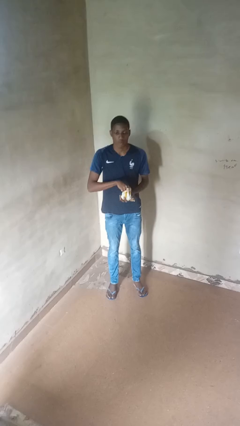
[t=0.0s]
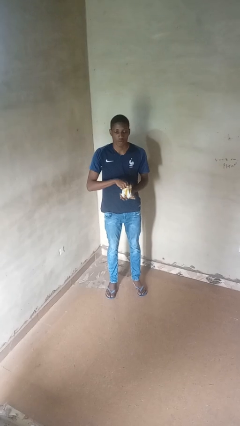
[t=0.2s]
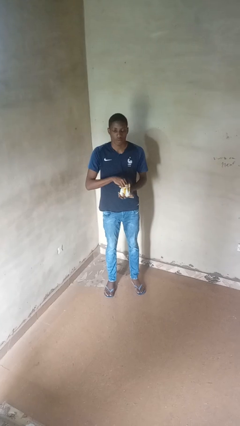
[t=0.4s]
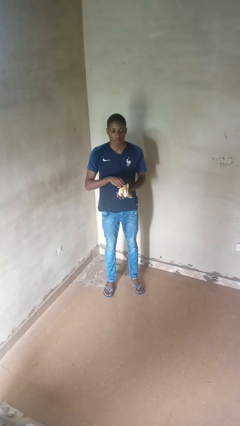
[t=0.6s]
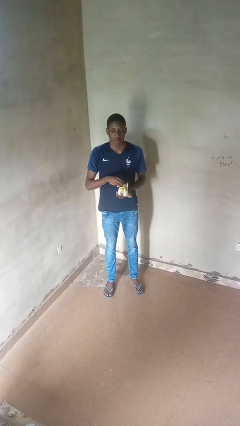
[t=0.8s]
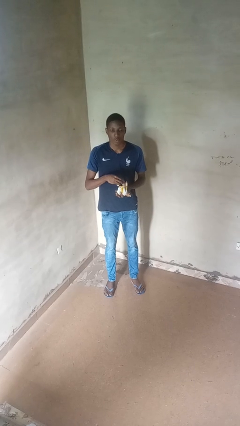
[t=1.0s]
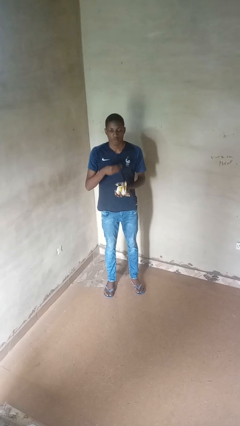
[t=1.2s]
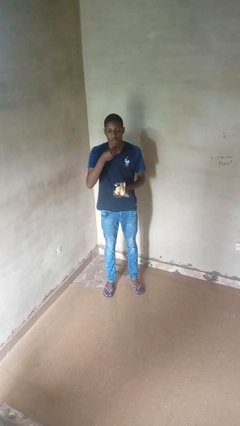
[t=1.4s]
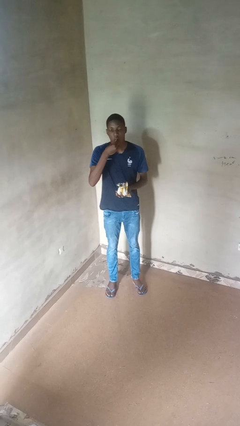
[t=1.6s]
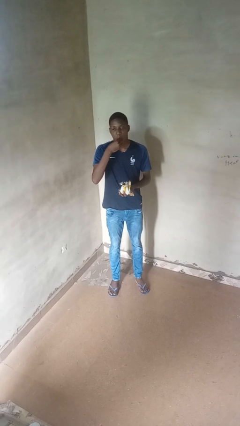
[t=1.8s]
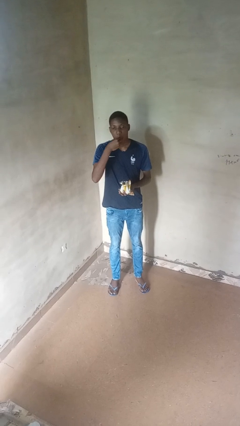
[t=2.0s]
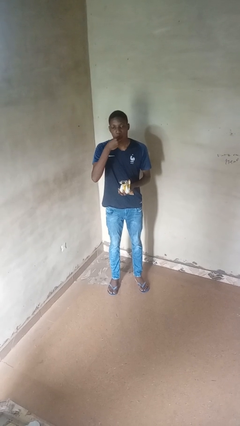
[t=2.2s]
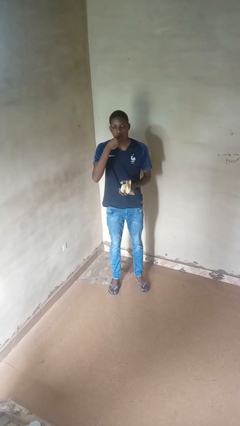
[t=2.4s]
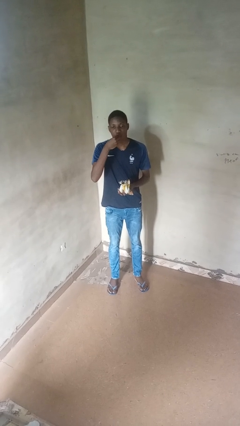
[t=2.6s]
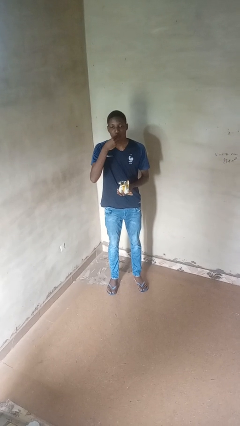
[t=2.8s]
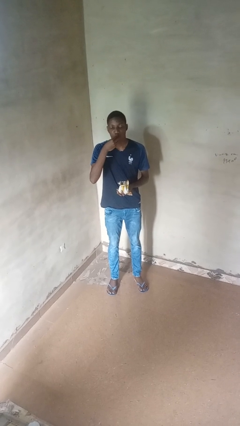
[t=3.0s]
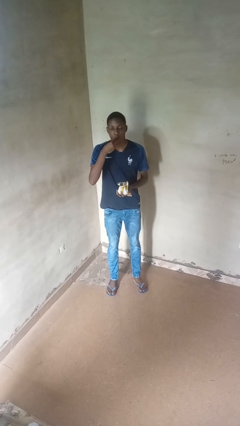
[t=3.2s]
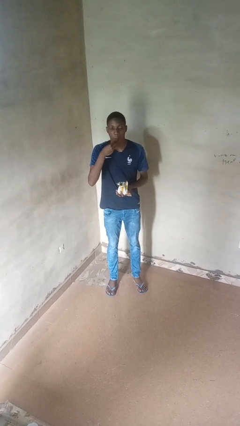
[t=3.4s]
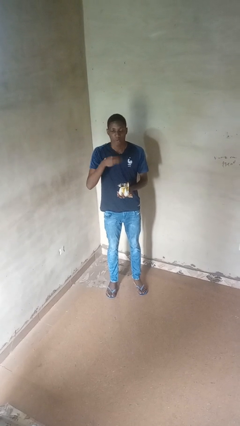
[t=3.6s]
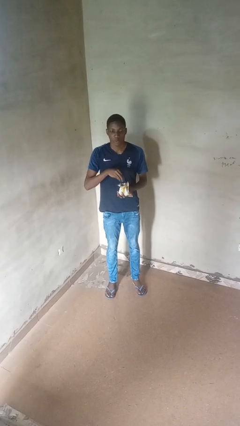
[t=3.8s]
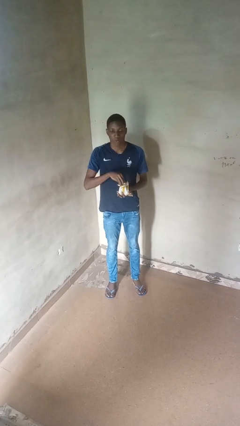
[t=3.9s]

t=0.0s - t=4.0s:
person eats snack from bag

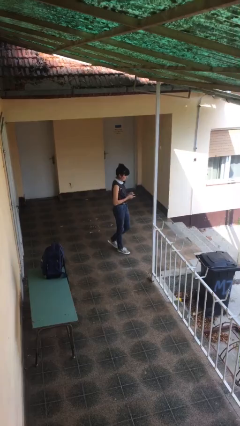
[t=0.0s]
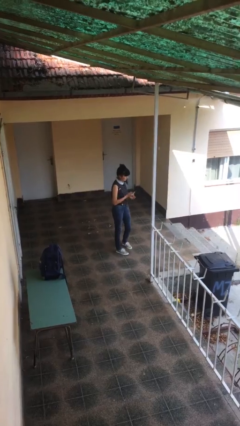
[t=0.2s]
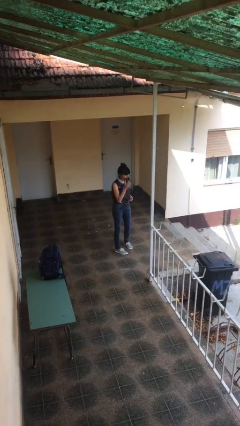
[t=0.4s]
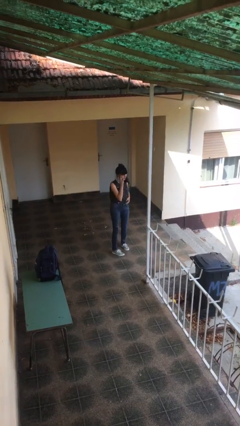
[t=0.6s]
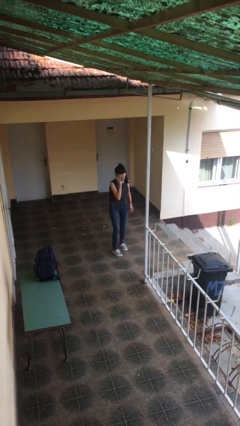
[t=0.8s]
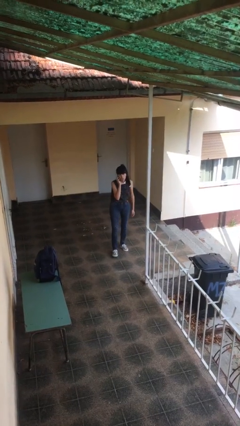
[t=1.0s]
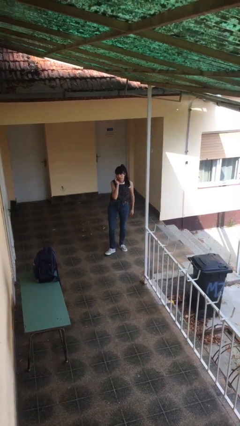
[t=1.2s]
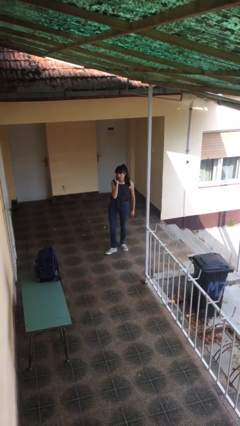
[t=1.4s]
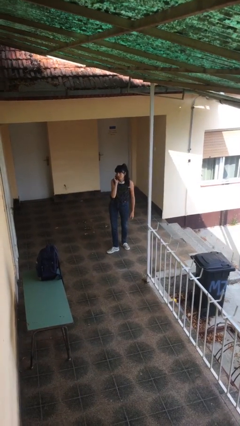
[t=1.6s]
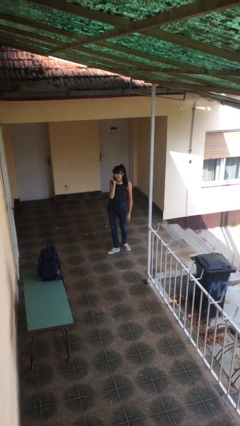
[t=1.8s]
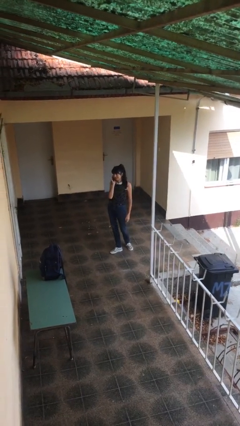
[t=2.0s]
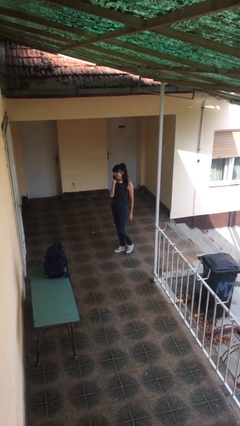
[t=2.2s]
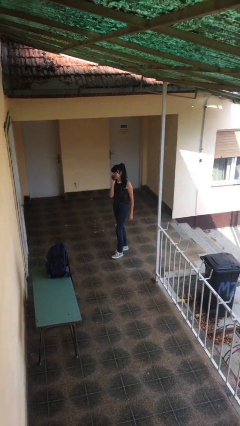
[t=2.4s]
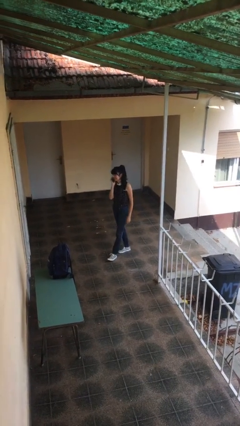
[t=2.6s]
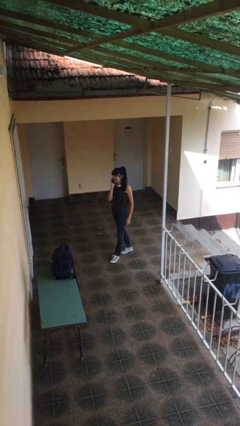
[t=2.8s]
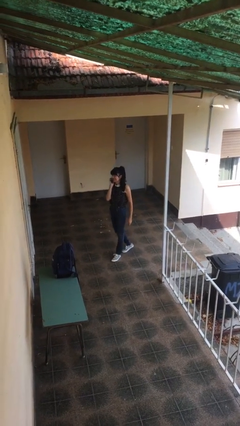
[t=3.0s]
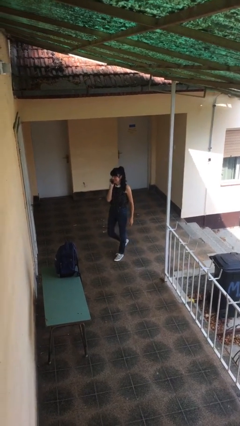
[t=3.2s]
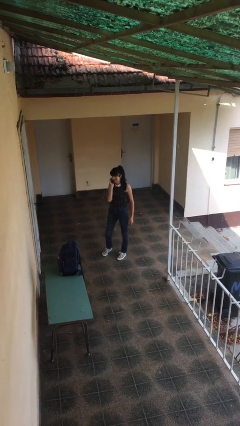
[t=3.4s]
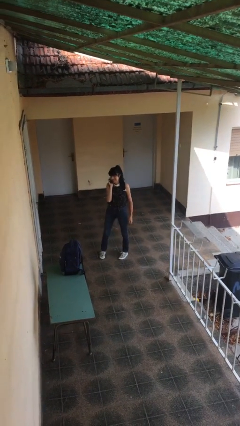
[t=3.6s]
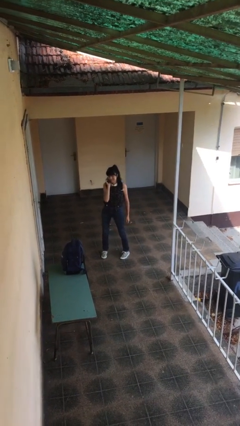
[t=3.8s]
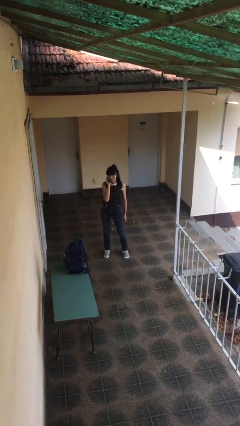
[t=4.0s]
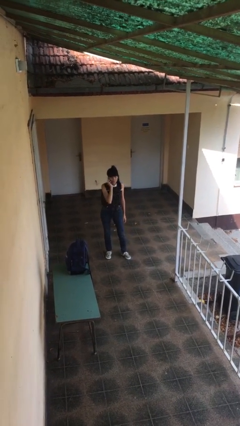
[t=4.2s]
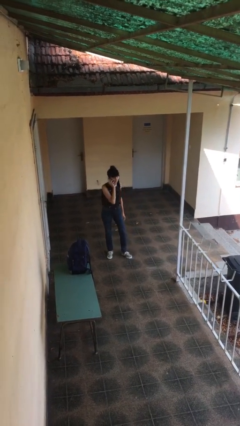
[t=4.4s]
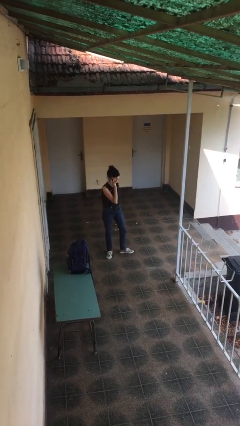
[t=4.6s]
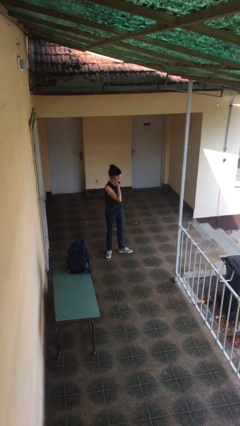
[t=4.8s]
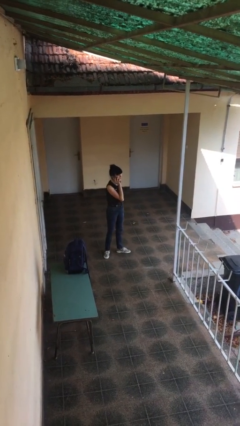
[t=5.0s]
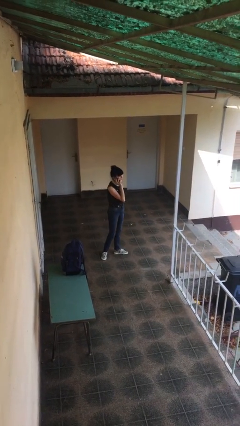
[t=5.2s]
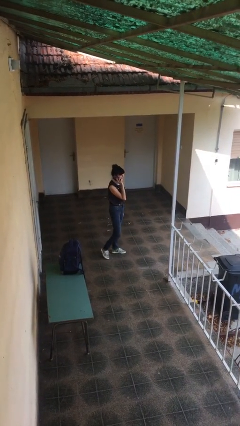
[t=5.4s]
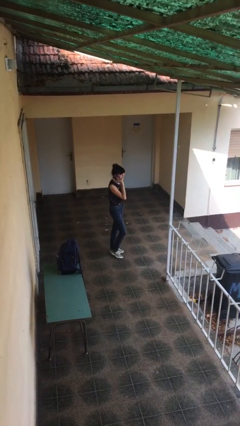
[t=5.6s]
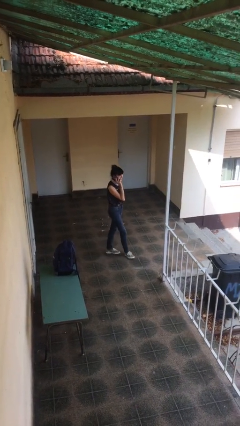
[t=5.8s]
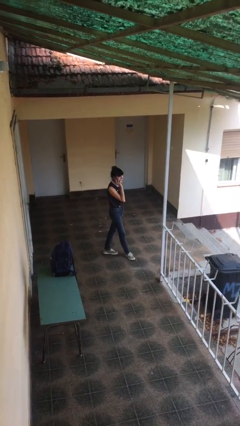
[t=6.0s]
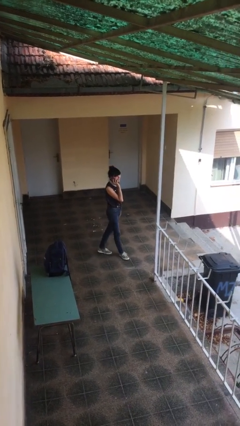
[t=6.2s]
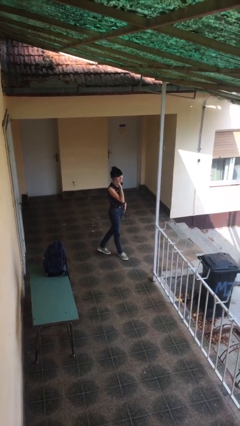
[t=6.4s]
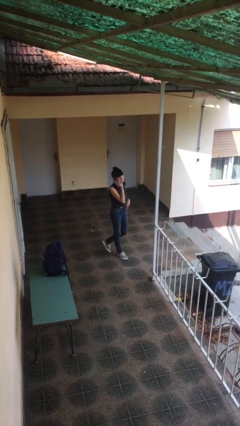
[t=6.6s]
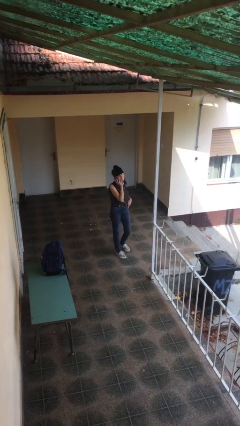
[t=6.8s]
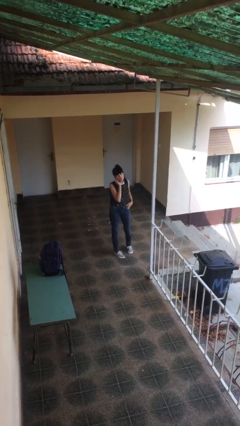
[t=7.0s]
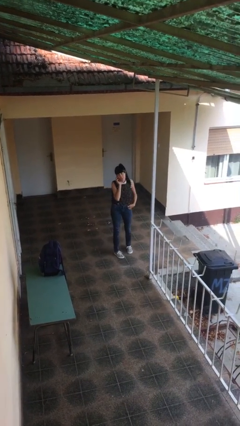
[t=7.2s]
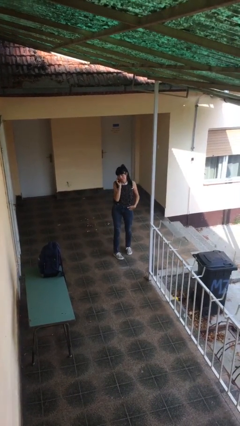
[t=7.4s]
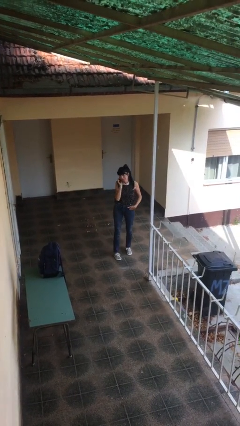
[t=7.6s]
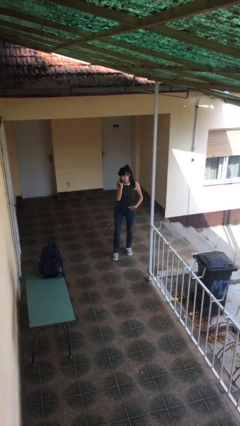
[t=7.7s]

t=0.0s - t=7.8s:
person talks on phone

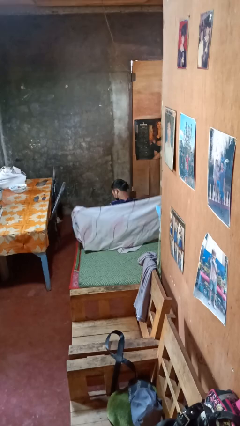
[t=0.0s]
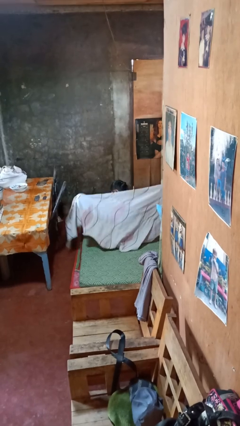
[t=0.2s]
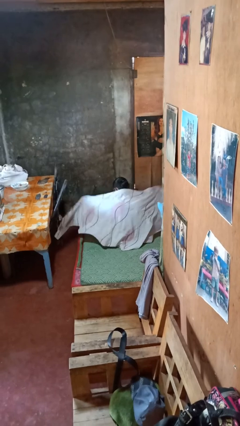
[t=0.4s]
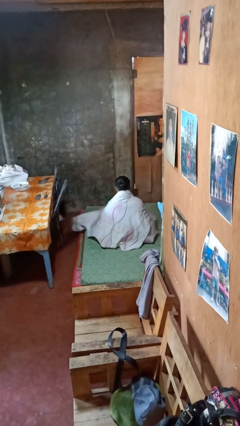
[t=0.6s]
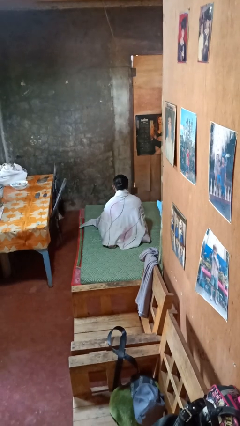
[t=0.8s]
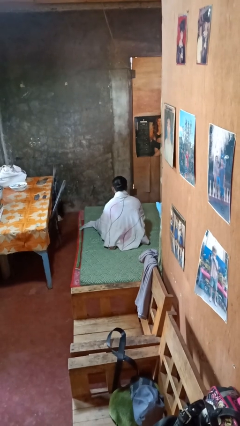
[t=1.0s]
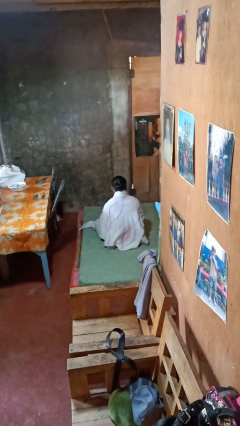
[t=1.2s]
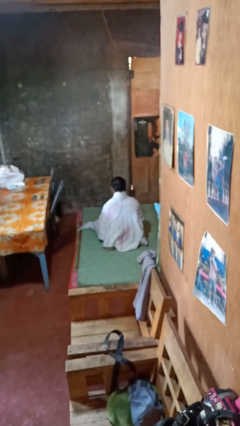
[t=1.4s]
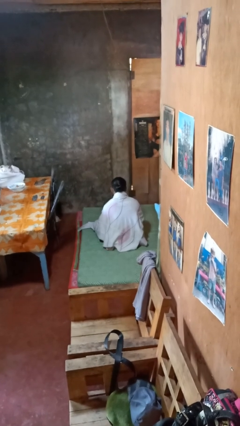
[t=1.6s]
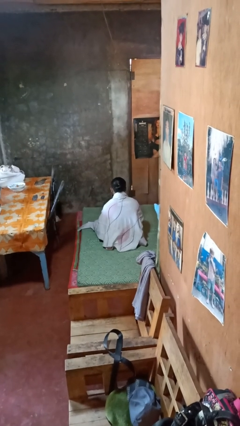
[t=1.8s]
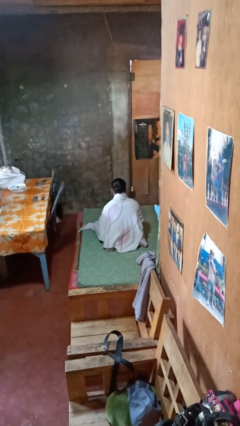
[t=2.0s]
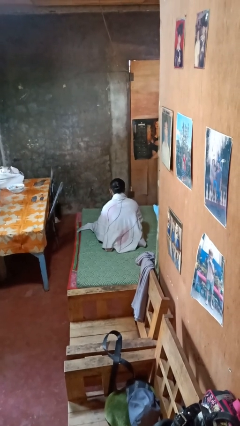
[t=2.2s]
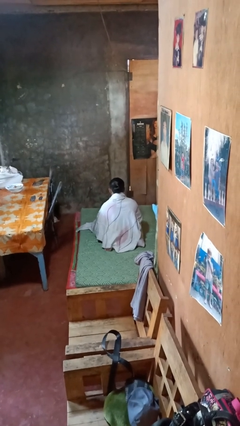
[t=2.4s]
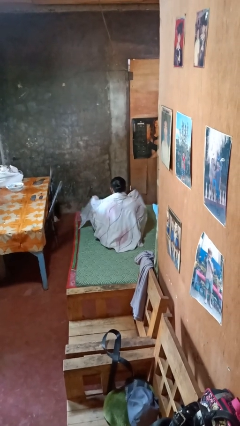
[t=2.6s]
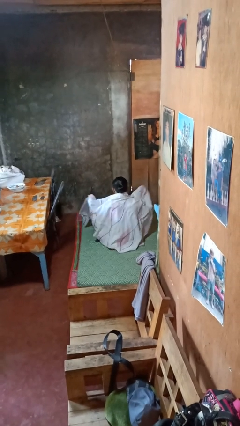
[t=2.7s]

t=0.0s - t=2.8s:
person covers with blanket

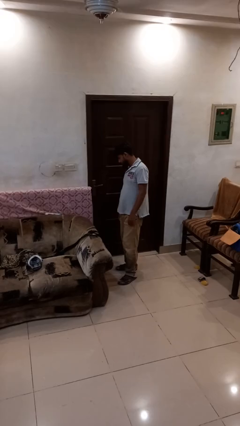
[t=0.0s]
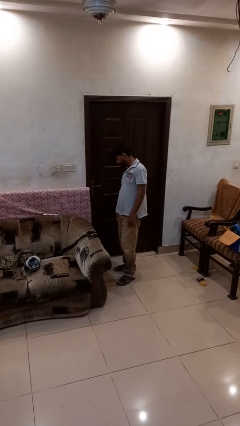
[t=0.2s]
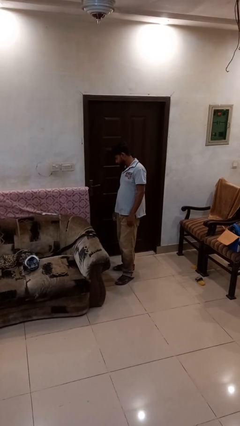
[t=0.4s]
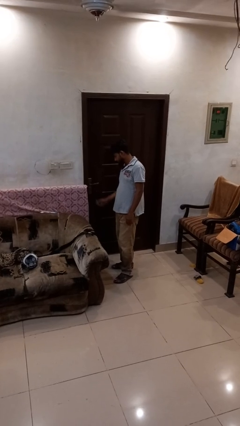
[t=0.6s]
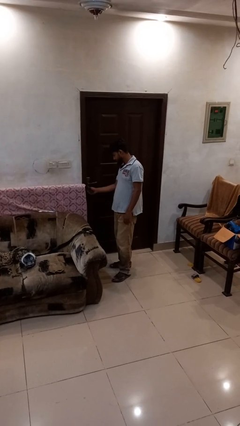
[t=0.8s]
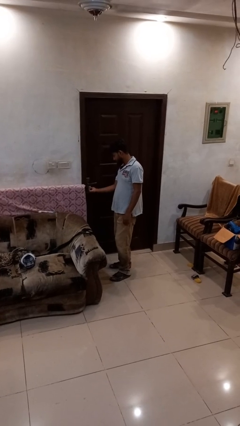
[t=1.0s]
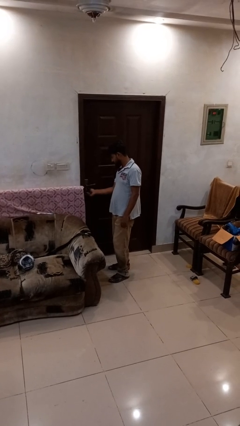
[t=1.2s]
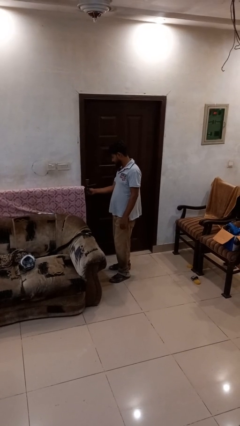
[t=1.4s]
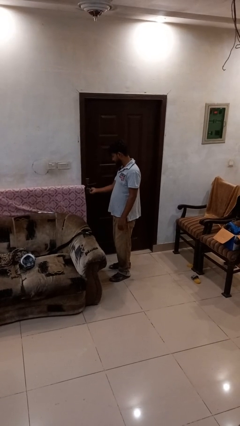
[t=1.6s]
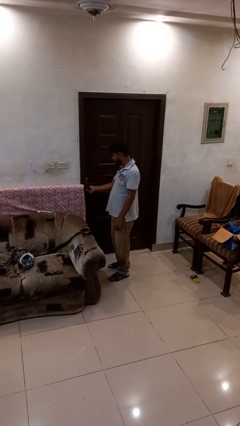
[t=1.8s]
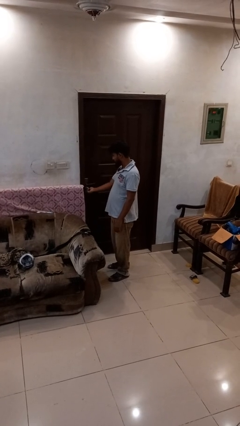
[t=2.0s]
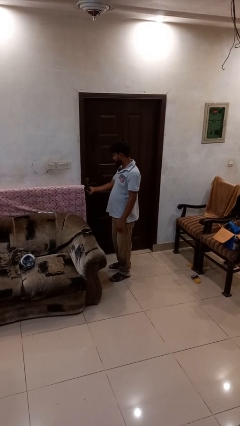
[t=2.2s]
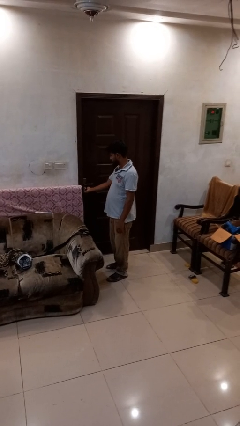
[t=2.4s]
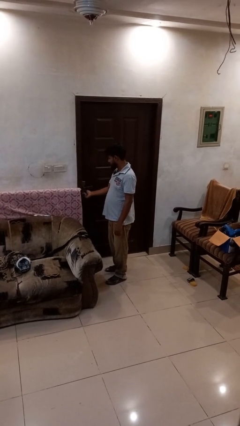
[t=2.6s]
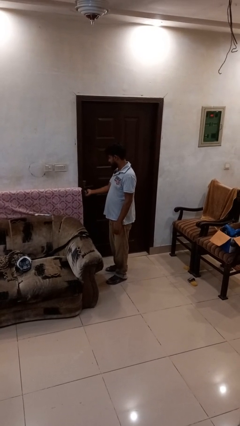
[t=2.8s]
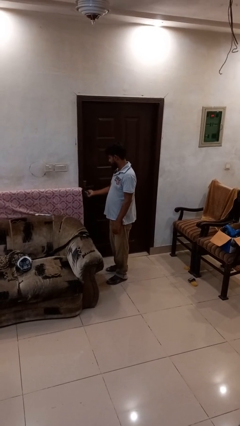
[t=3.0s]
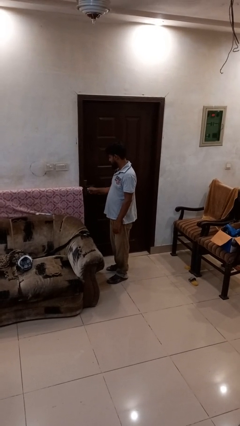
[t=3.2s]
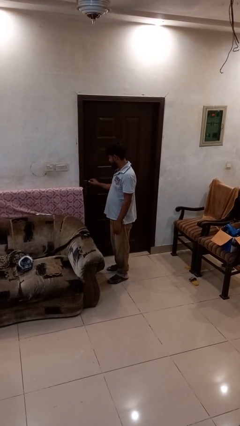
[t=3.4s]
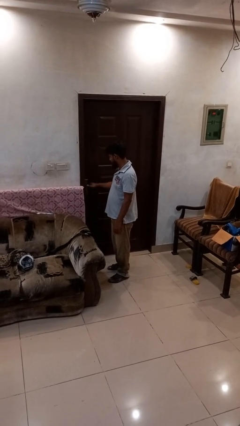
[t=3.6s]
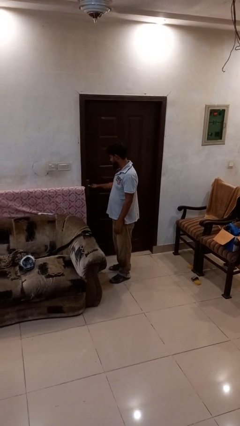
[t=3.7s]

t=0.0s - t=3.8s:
person unlocks door with keys
